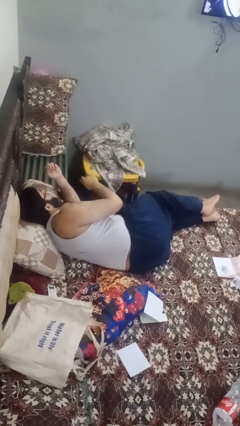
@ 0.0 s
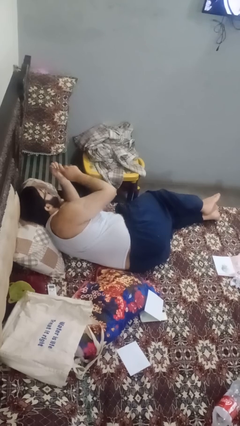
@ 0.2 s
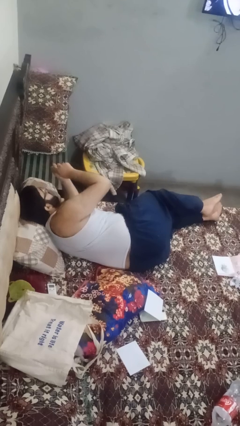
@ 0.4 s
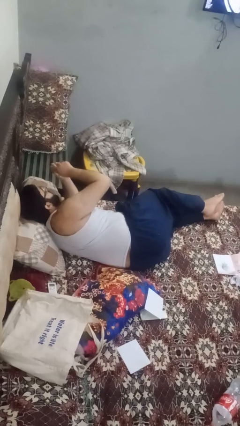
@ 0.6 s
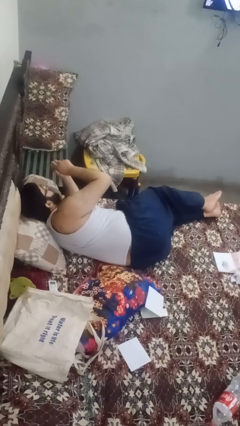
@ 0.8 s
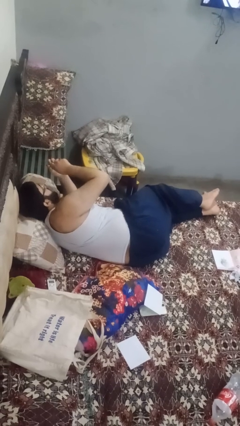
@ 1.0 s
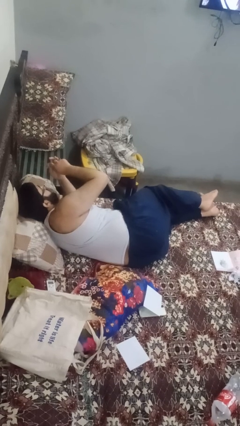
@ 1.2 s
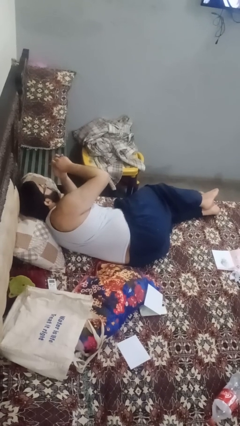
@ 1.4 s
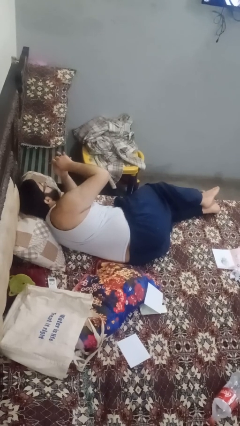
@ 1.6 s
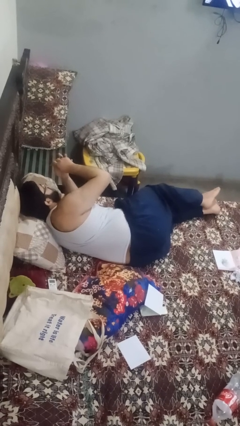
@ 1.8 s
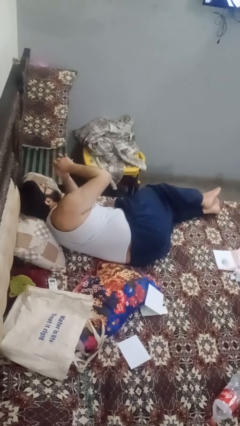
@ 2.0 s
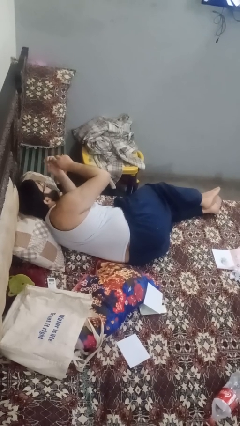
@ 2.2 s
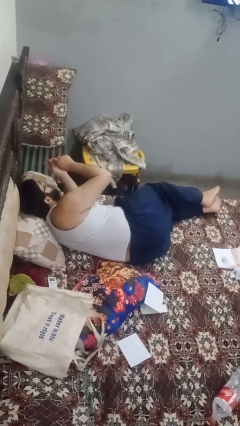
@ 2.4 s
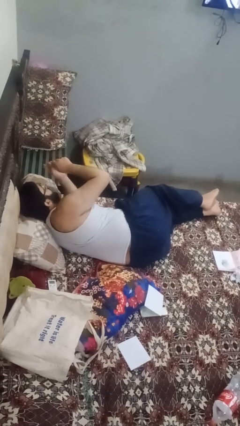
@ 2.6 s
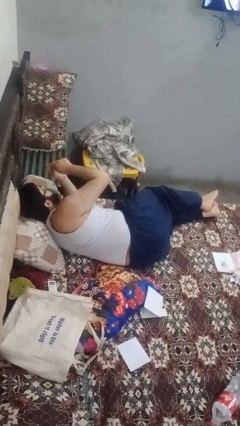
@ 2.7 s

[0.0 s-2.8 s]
person files fingernails

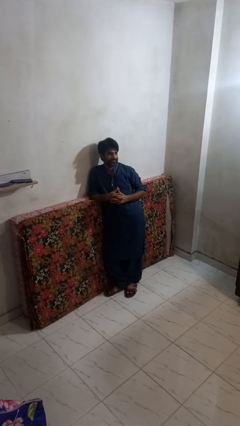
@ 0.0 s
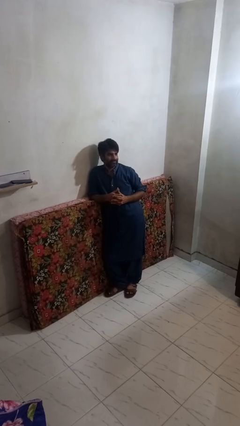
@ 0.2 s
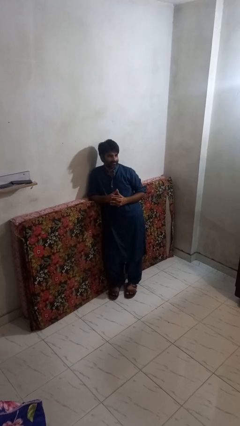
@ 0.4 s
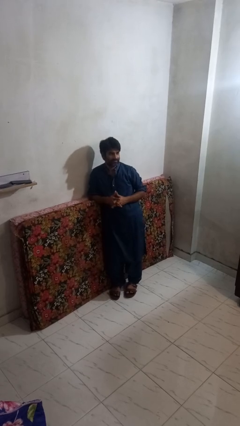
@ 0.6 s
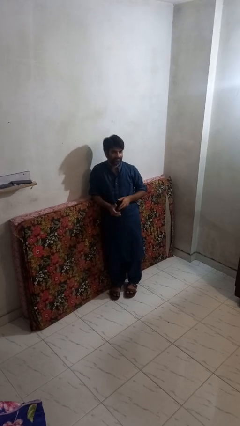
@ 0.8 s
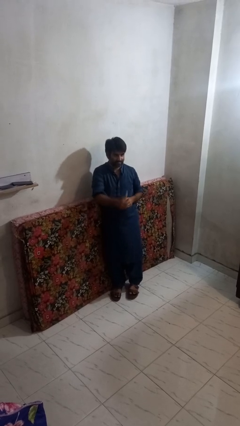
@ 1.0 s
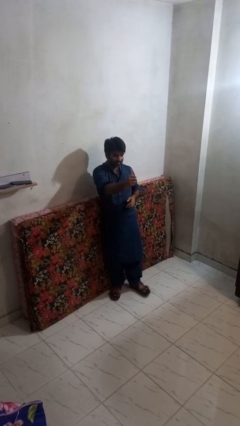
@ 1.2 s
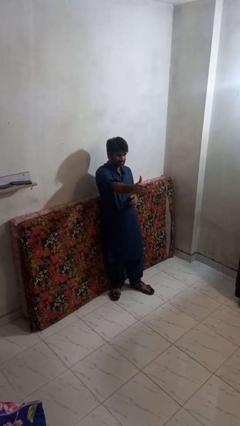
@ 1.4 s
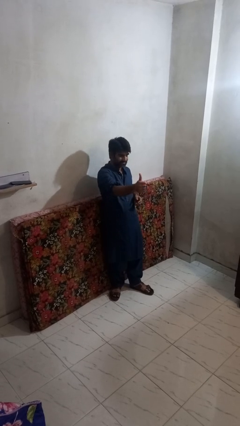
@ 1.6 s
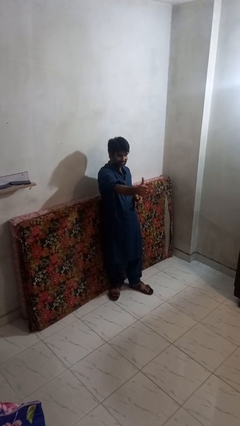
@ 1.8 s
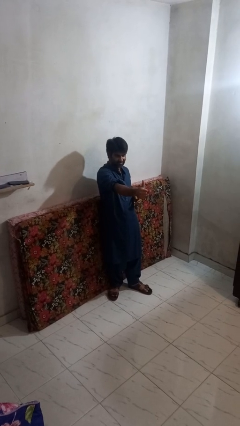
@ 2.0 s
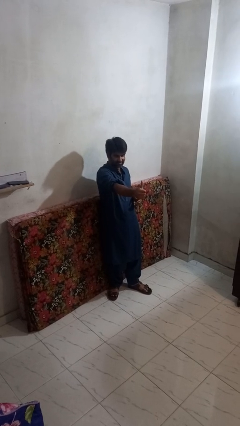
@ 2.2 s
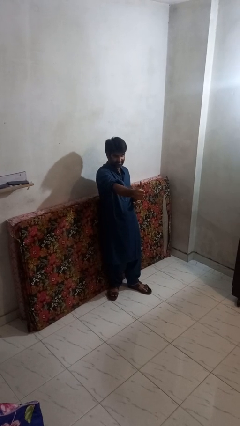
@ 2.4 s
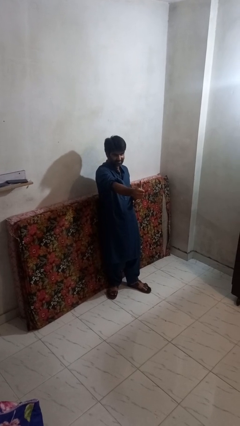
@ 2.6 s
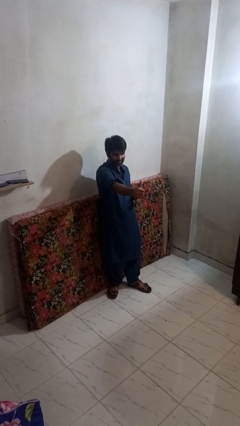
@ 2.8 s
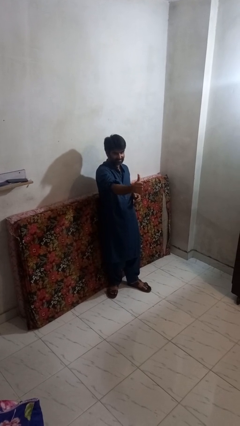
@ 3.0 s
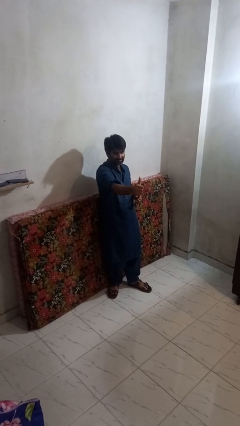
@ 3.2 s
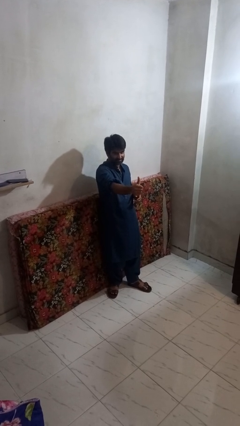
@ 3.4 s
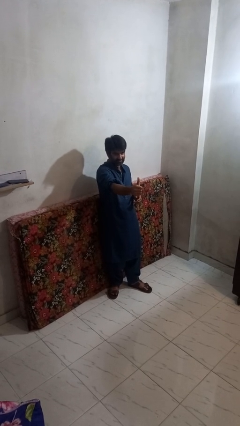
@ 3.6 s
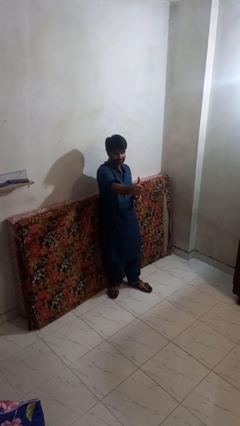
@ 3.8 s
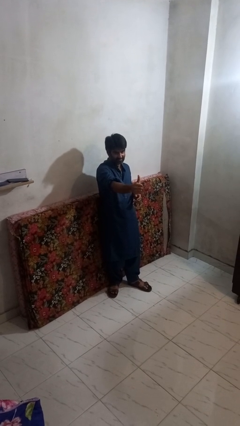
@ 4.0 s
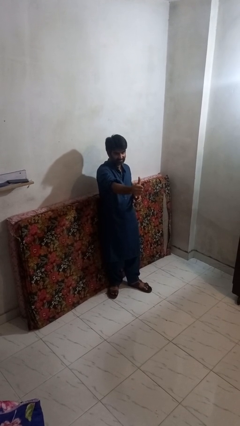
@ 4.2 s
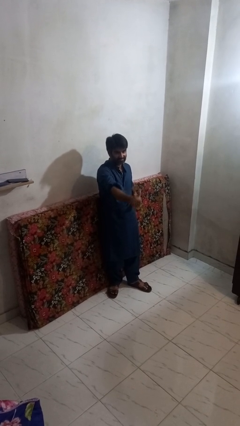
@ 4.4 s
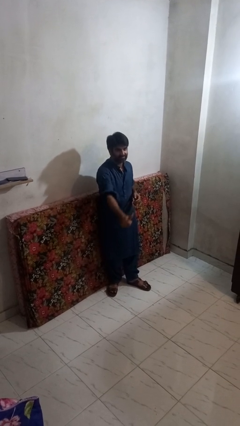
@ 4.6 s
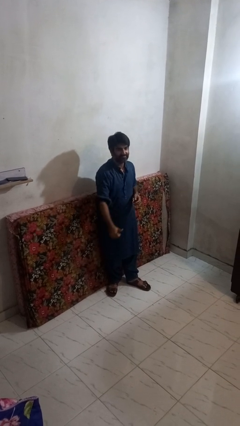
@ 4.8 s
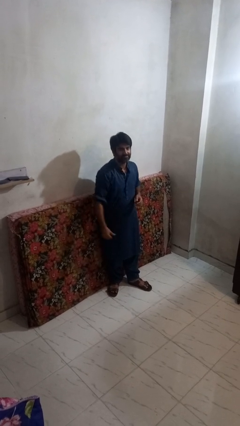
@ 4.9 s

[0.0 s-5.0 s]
person gestures thumbs up

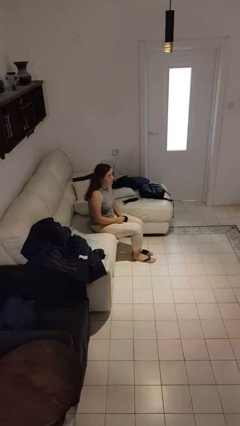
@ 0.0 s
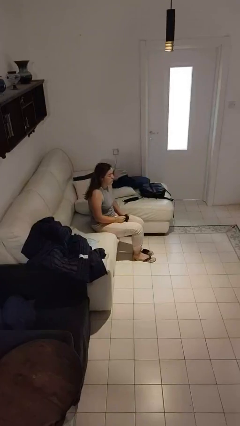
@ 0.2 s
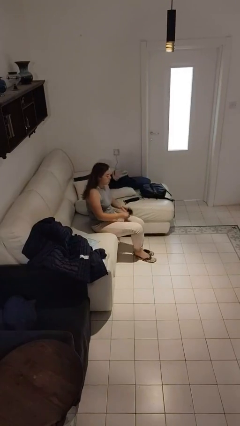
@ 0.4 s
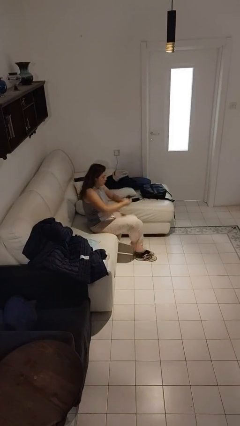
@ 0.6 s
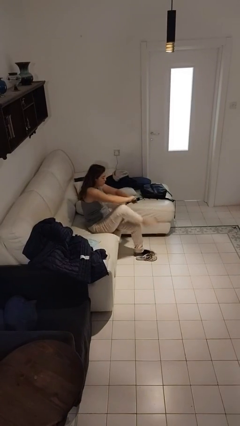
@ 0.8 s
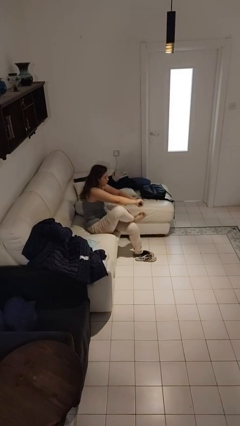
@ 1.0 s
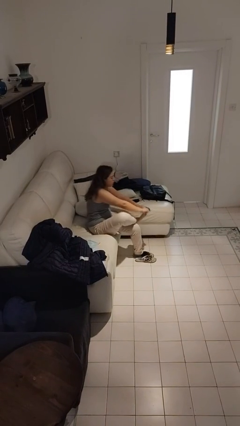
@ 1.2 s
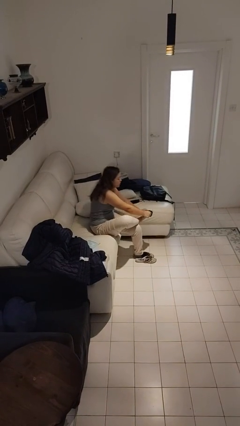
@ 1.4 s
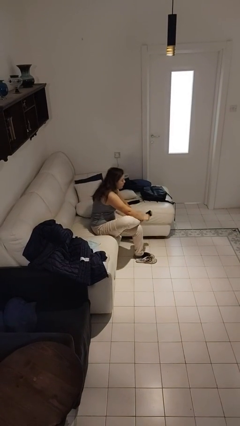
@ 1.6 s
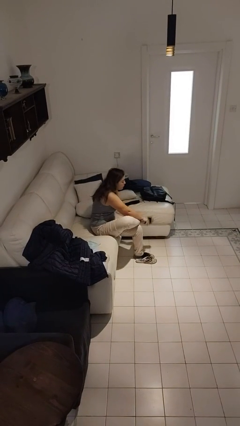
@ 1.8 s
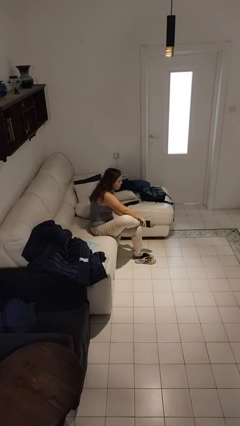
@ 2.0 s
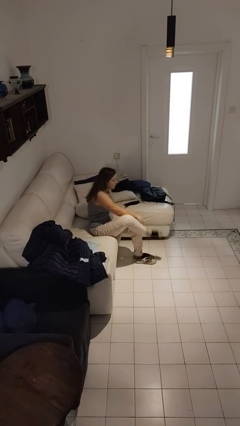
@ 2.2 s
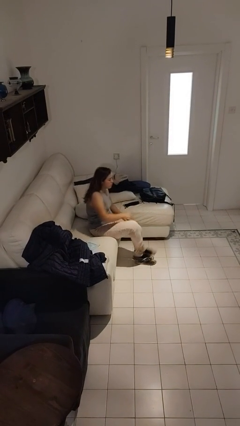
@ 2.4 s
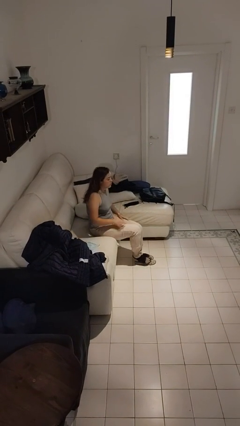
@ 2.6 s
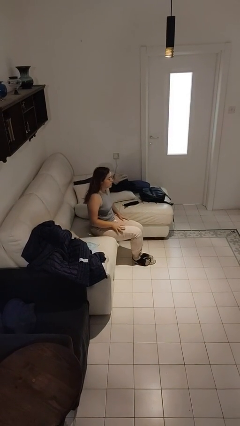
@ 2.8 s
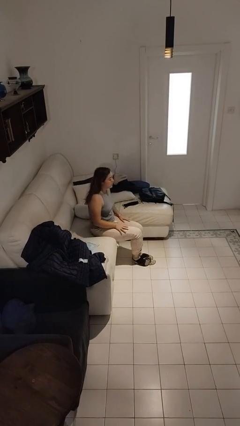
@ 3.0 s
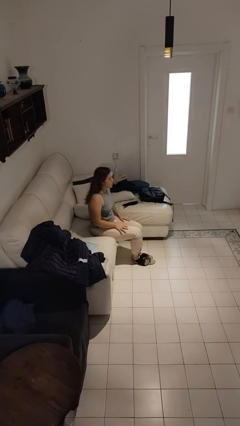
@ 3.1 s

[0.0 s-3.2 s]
person puts on socks

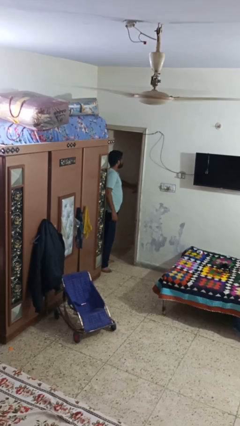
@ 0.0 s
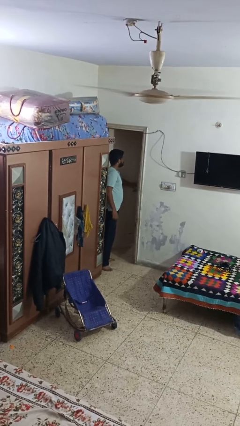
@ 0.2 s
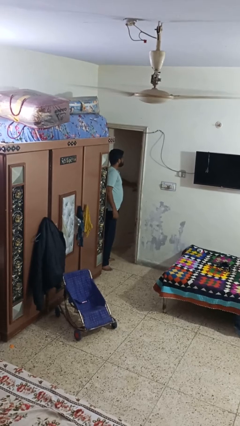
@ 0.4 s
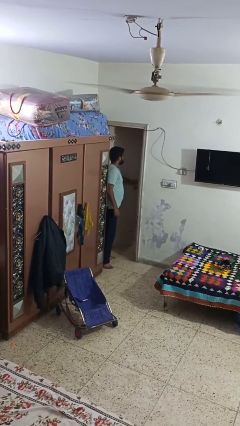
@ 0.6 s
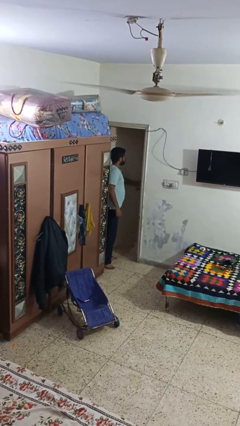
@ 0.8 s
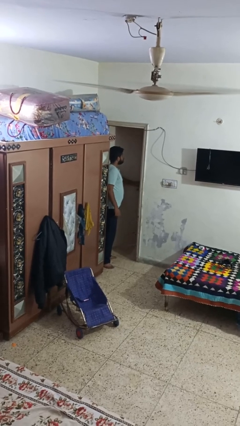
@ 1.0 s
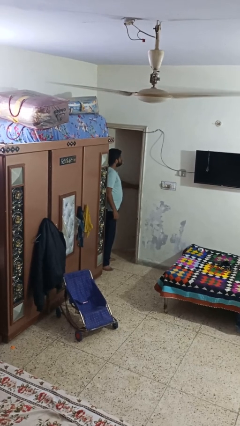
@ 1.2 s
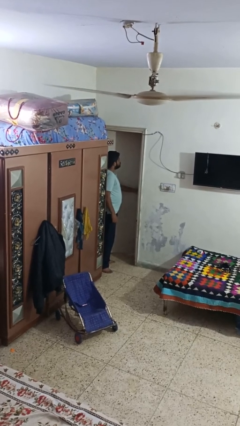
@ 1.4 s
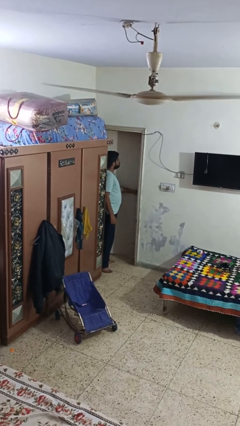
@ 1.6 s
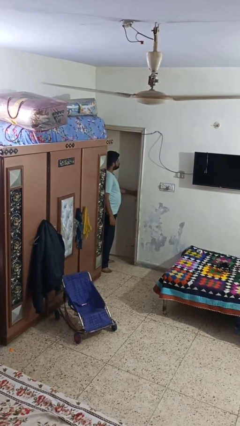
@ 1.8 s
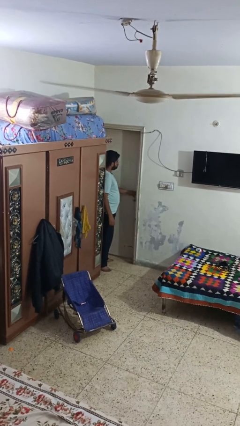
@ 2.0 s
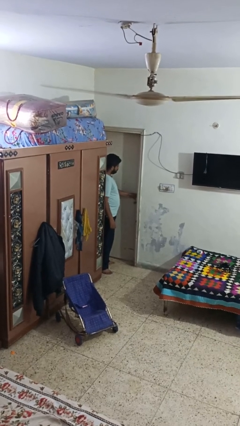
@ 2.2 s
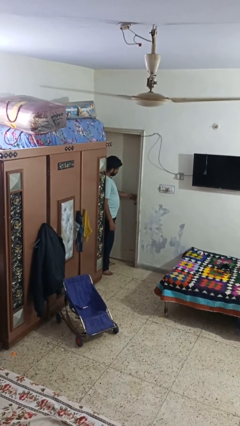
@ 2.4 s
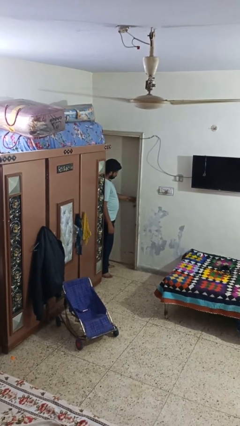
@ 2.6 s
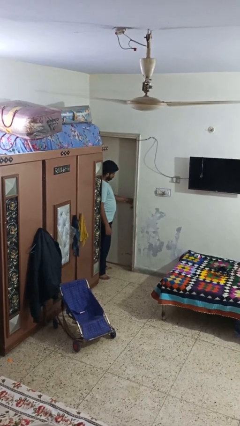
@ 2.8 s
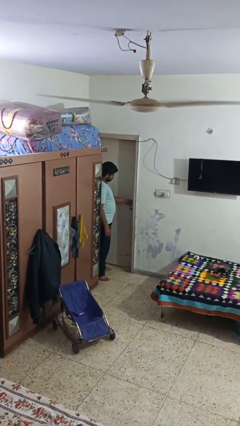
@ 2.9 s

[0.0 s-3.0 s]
person closes facility door

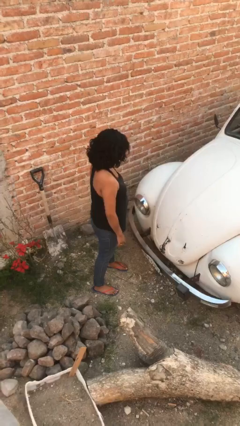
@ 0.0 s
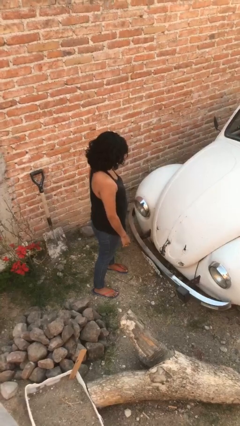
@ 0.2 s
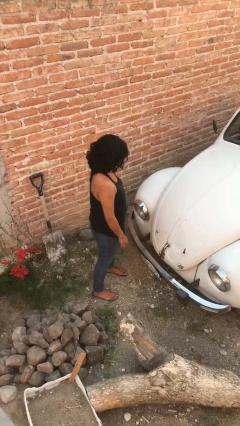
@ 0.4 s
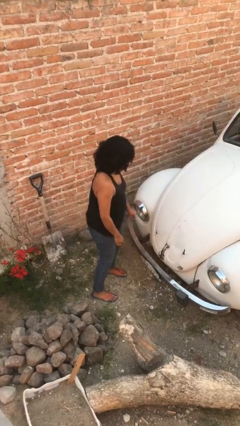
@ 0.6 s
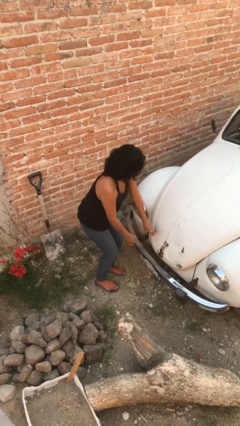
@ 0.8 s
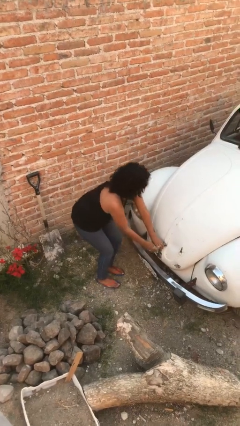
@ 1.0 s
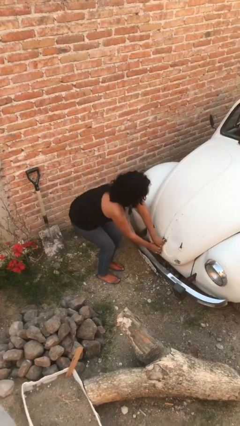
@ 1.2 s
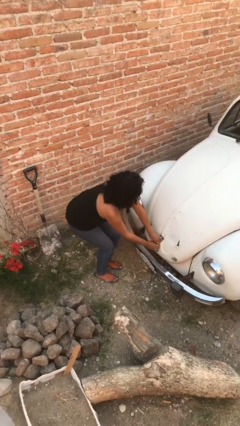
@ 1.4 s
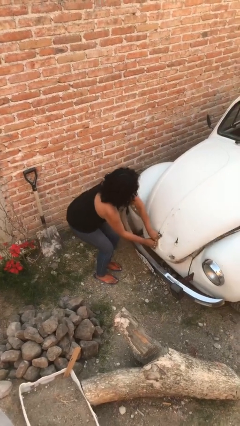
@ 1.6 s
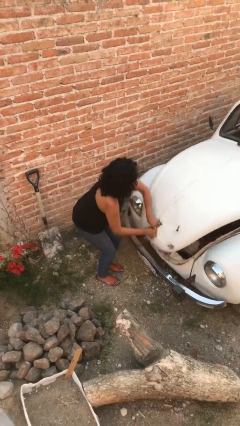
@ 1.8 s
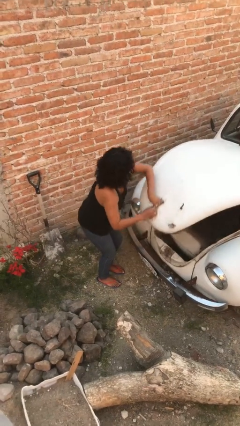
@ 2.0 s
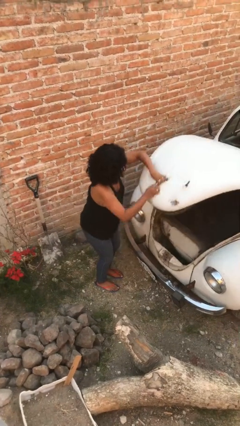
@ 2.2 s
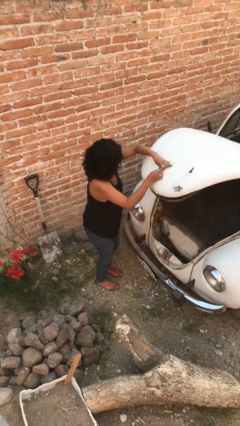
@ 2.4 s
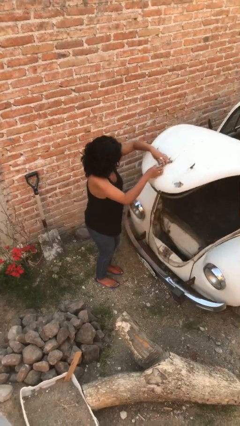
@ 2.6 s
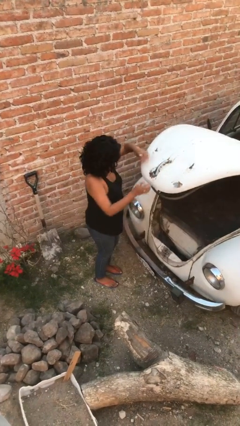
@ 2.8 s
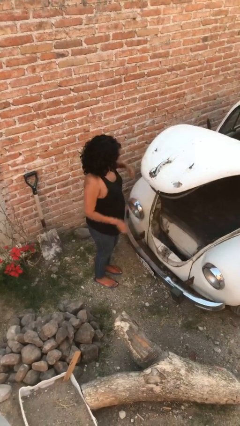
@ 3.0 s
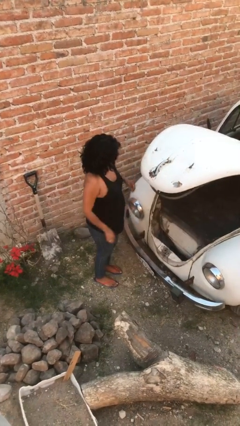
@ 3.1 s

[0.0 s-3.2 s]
person opens car trunk
